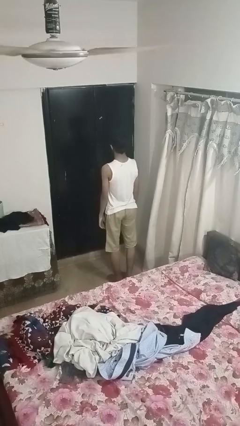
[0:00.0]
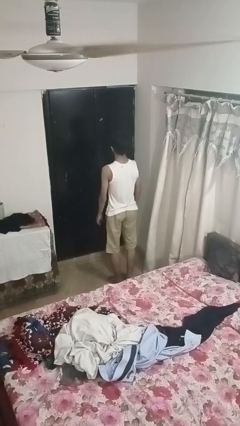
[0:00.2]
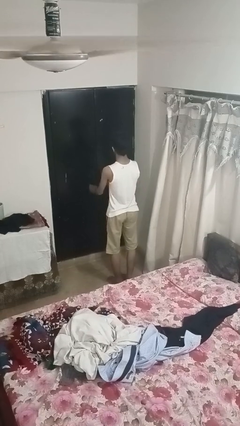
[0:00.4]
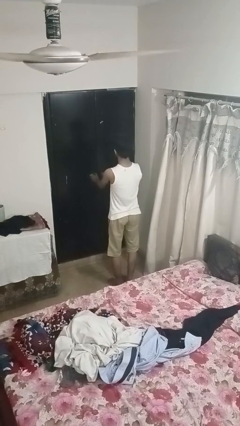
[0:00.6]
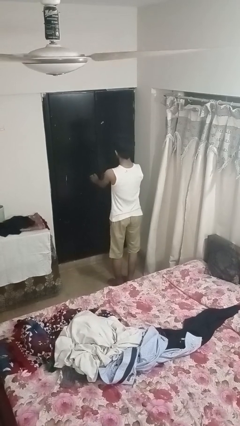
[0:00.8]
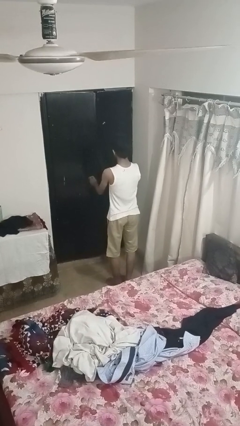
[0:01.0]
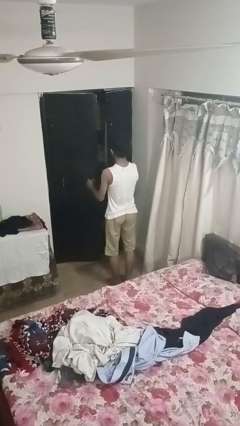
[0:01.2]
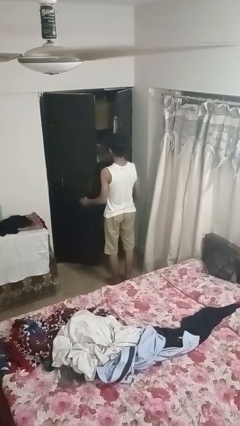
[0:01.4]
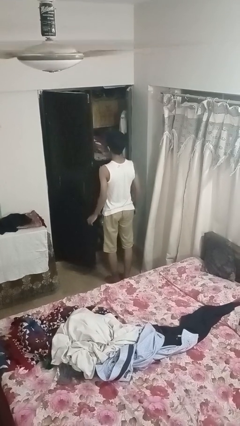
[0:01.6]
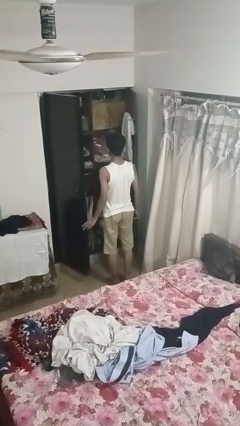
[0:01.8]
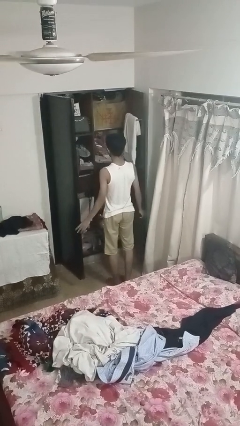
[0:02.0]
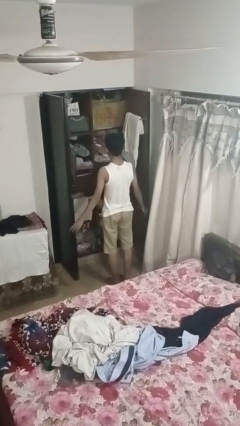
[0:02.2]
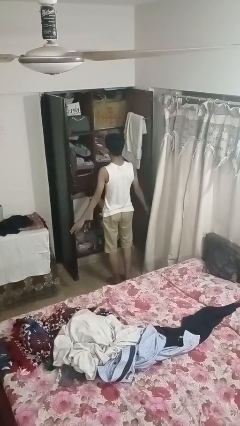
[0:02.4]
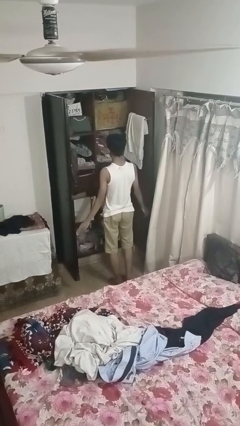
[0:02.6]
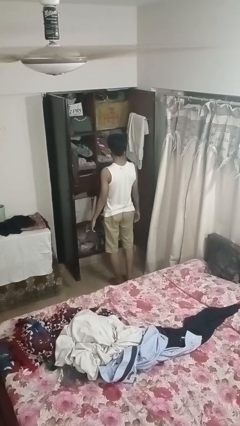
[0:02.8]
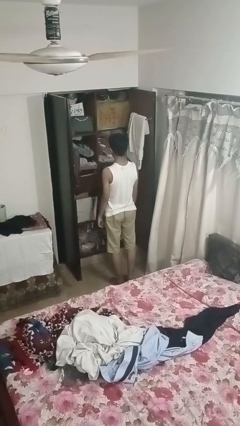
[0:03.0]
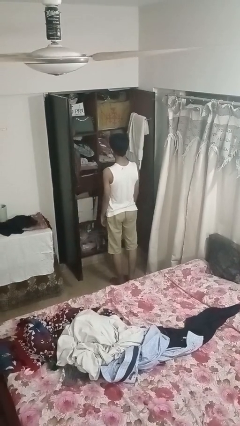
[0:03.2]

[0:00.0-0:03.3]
person opens closet door

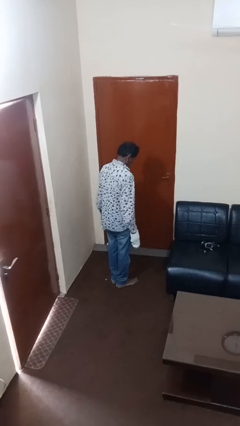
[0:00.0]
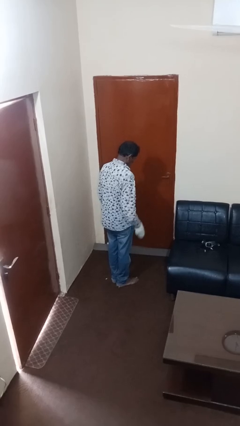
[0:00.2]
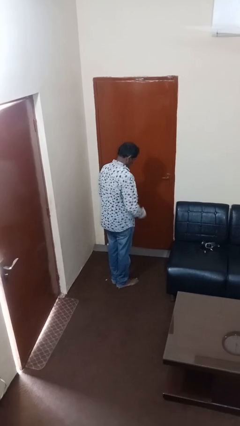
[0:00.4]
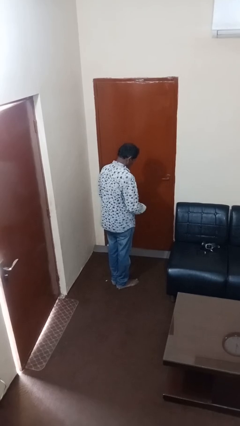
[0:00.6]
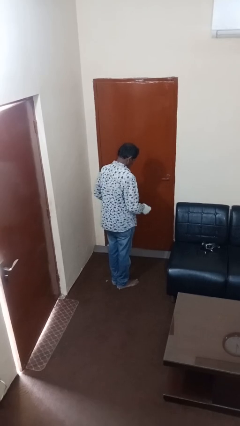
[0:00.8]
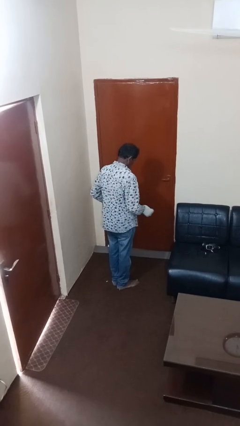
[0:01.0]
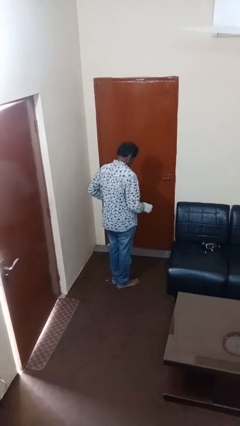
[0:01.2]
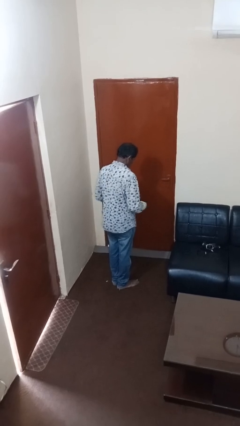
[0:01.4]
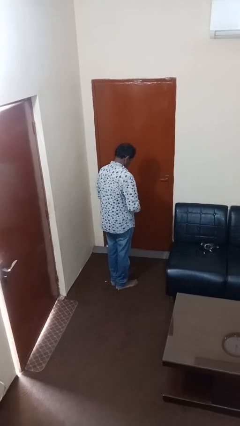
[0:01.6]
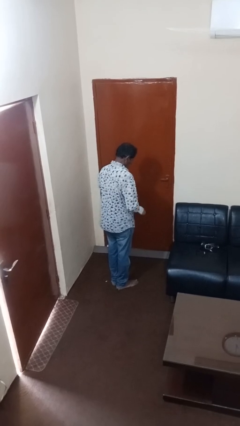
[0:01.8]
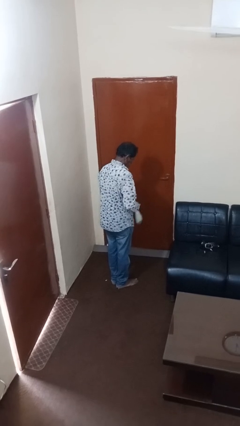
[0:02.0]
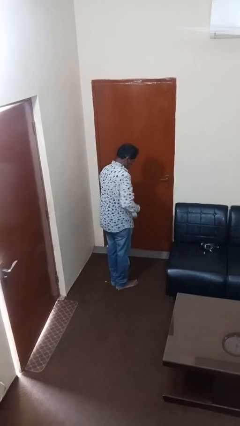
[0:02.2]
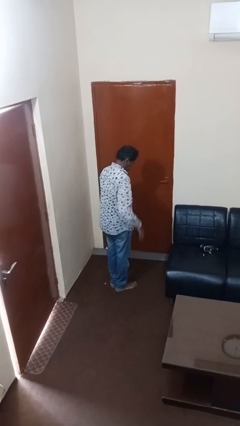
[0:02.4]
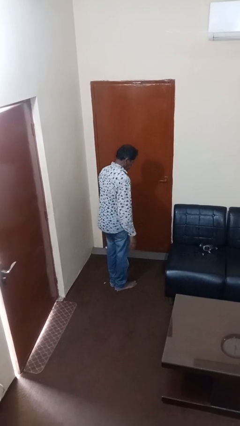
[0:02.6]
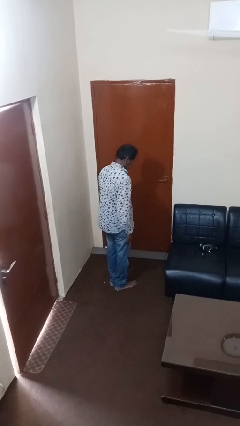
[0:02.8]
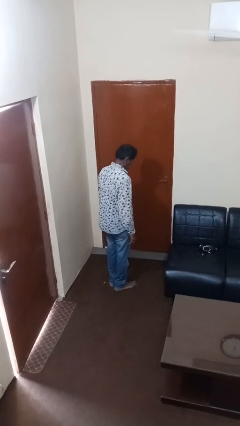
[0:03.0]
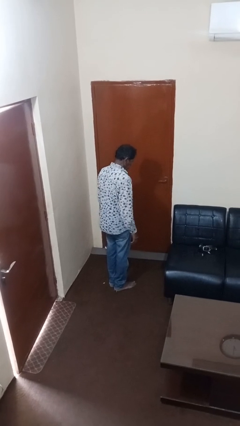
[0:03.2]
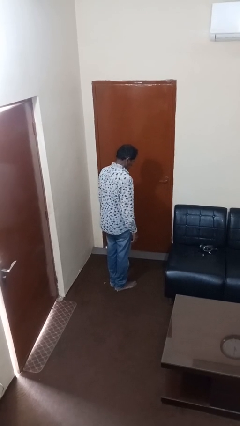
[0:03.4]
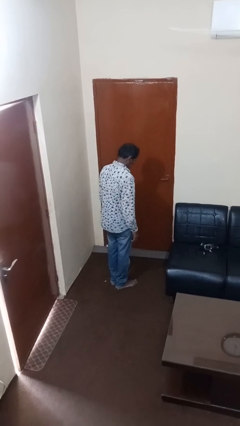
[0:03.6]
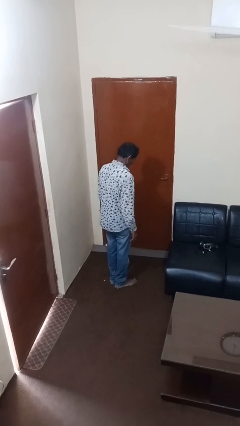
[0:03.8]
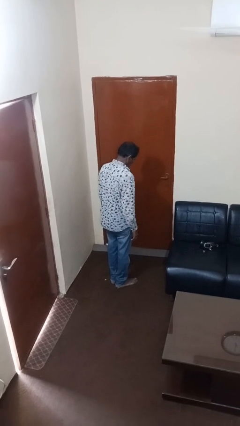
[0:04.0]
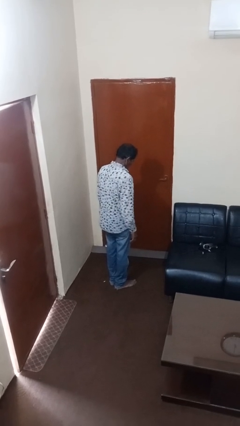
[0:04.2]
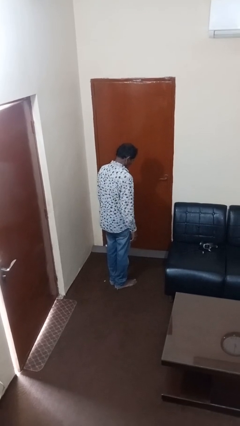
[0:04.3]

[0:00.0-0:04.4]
person takes off gloves

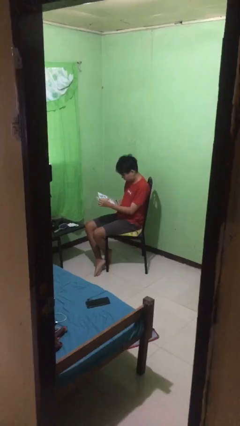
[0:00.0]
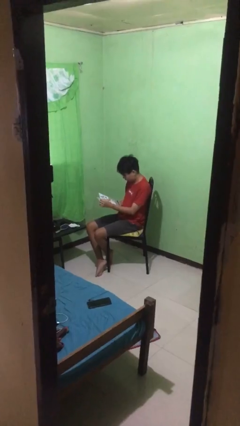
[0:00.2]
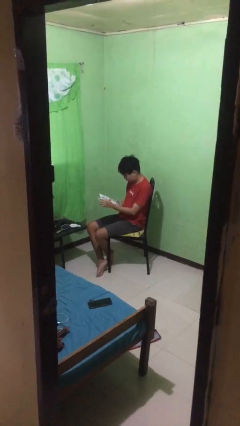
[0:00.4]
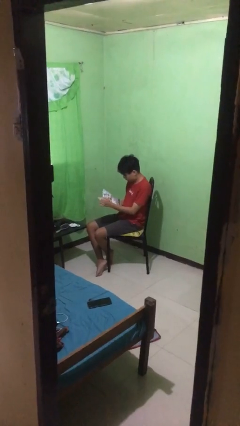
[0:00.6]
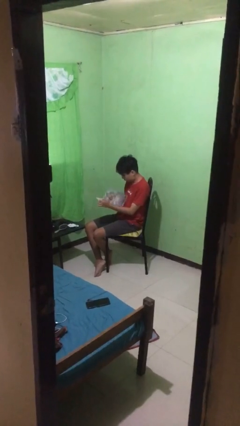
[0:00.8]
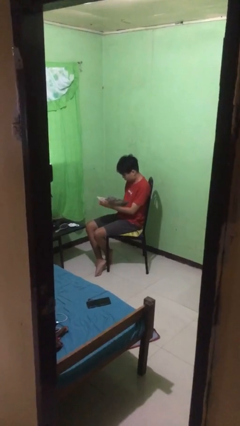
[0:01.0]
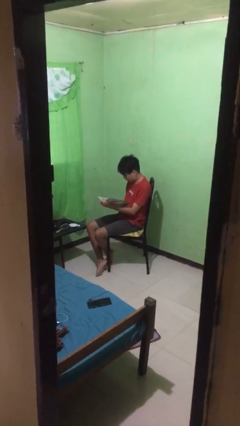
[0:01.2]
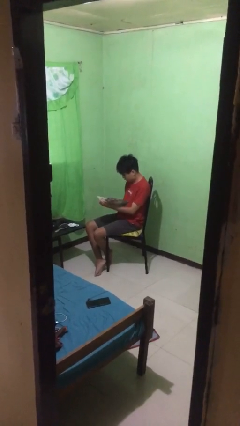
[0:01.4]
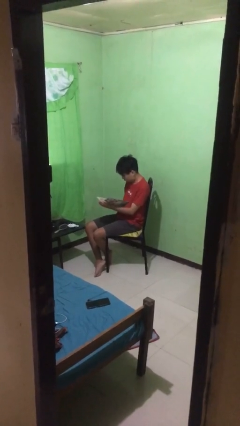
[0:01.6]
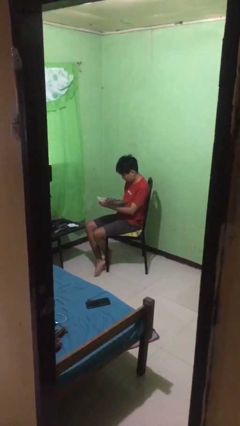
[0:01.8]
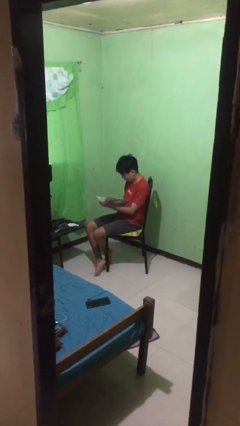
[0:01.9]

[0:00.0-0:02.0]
person reads document

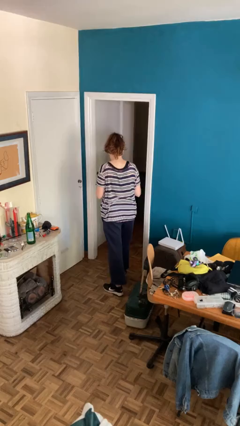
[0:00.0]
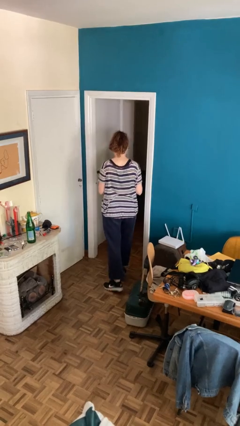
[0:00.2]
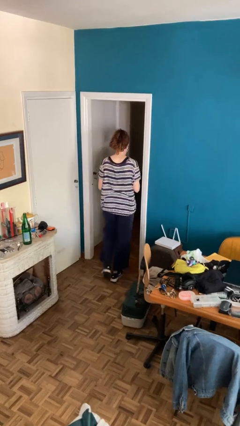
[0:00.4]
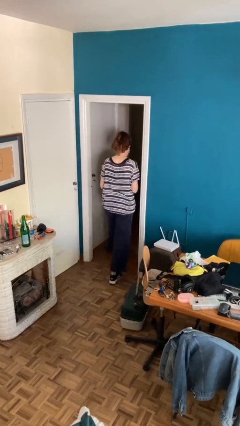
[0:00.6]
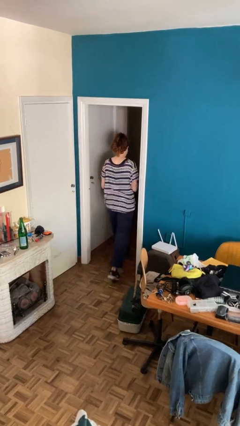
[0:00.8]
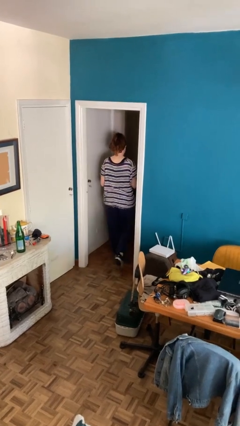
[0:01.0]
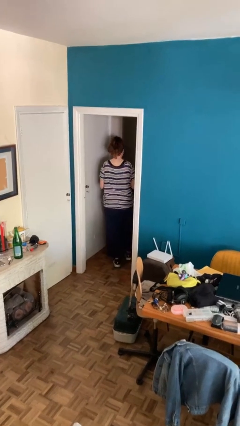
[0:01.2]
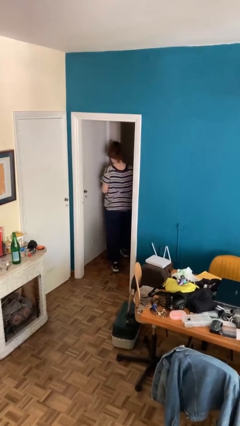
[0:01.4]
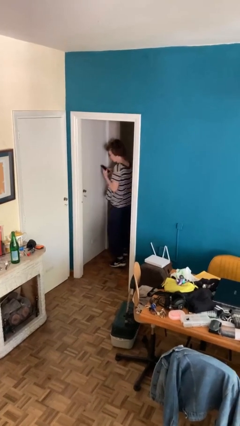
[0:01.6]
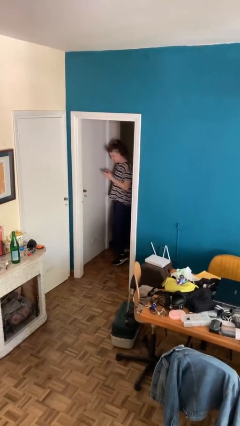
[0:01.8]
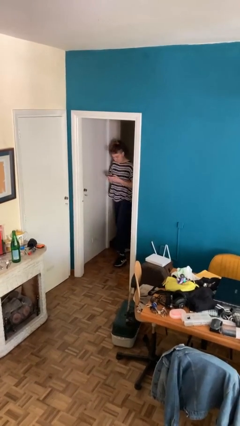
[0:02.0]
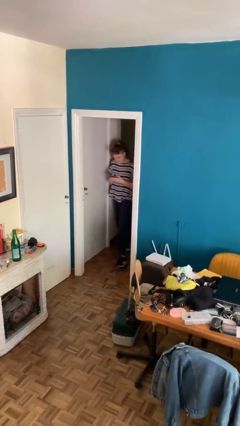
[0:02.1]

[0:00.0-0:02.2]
person enters scene through structure

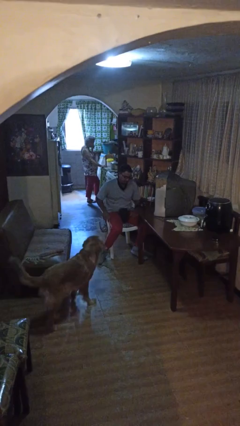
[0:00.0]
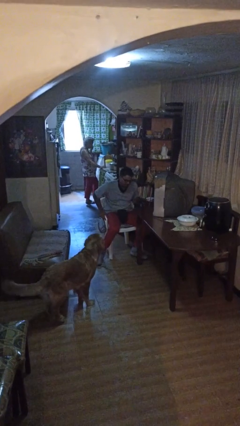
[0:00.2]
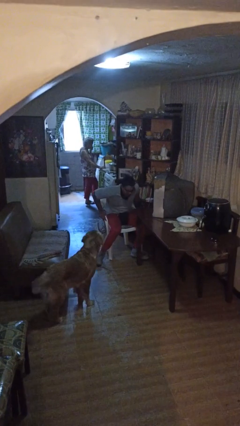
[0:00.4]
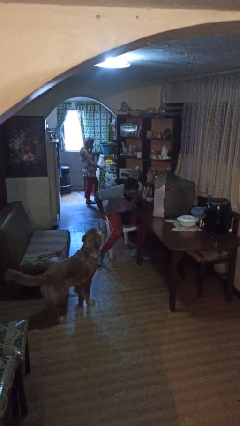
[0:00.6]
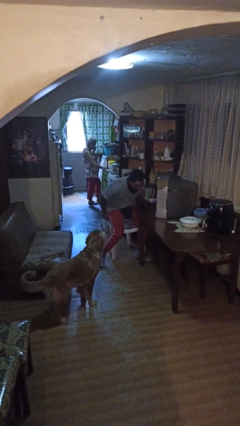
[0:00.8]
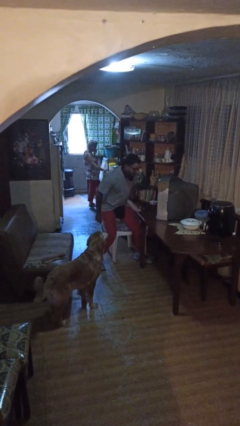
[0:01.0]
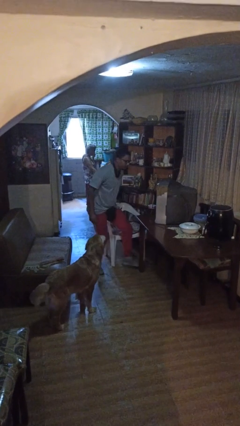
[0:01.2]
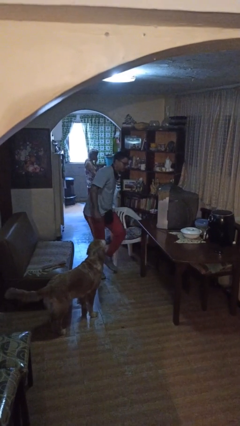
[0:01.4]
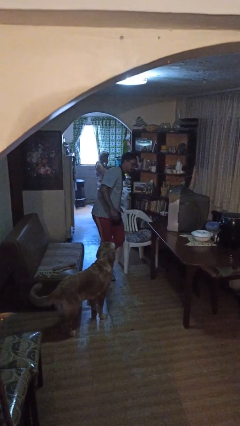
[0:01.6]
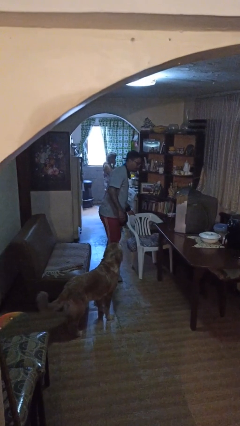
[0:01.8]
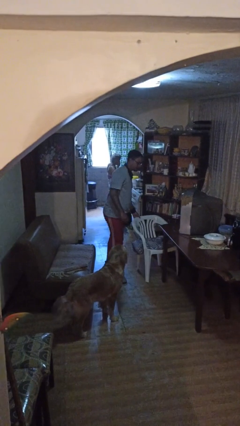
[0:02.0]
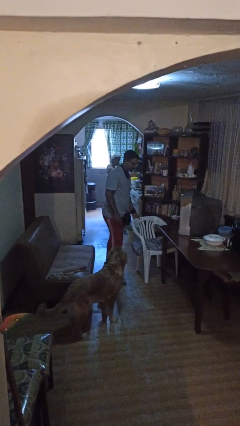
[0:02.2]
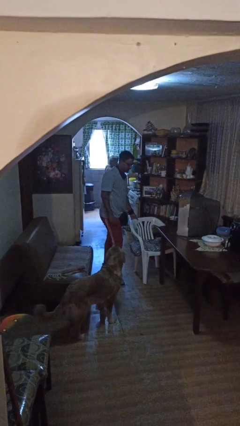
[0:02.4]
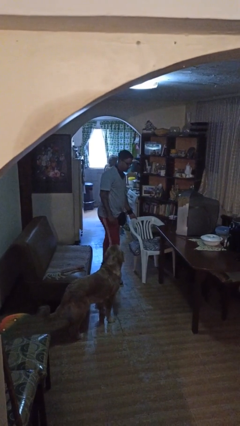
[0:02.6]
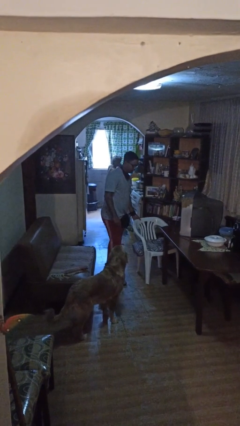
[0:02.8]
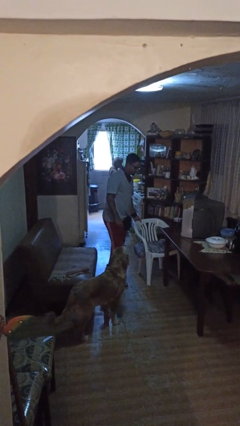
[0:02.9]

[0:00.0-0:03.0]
person stands up

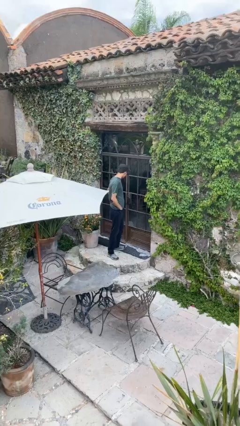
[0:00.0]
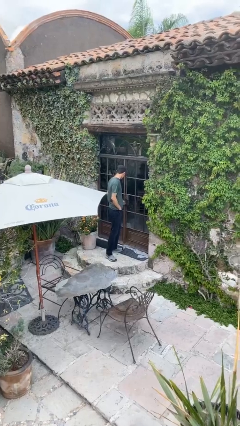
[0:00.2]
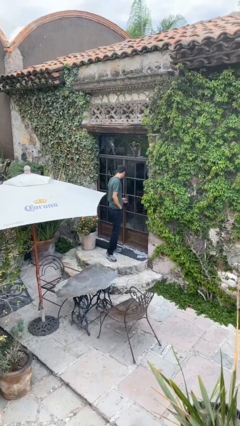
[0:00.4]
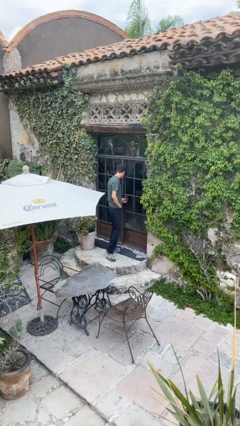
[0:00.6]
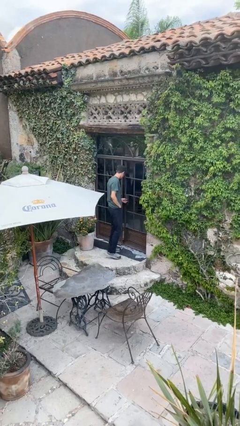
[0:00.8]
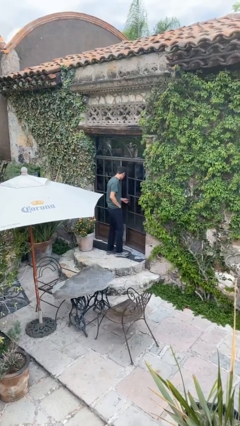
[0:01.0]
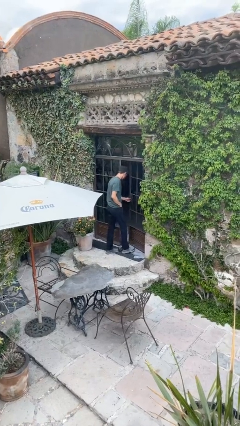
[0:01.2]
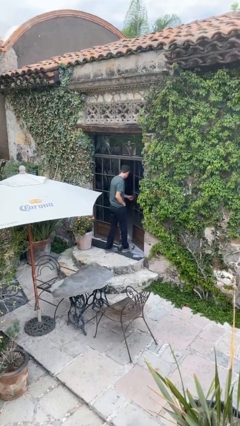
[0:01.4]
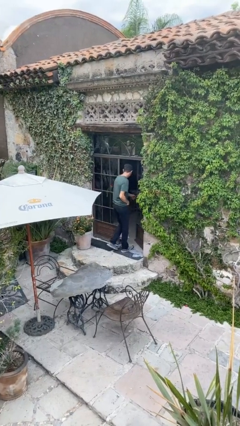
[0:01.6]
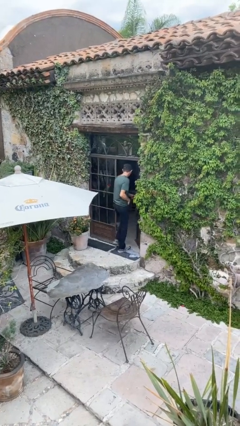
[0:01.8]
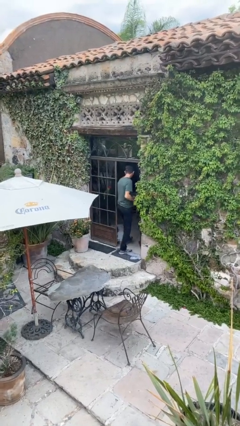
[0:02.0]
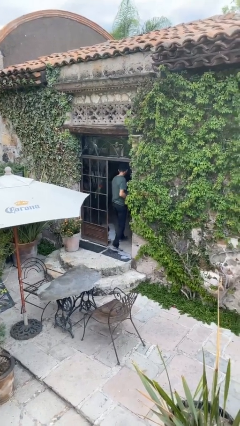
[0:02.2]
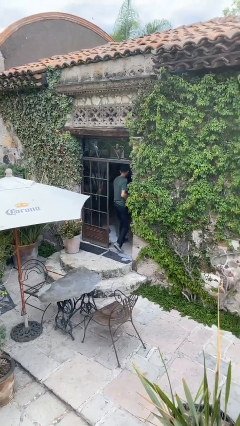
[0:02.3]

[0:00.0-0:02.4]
person opens facility door

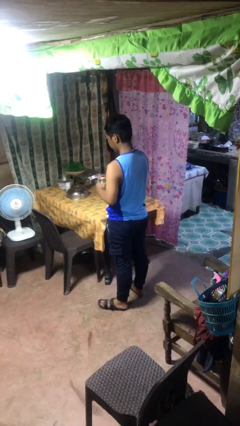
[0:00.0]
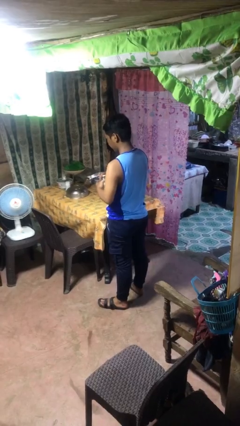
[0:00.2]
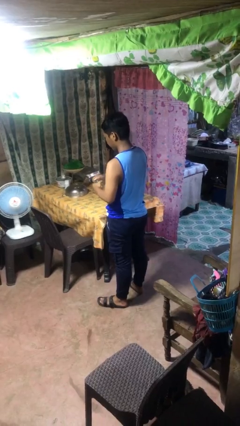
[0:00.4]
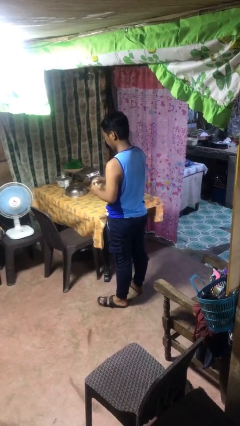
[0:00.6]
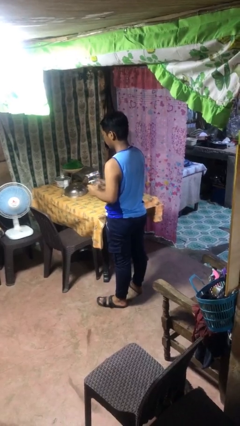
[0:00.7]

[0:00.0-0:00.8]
person closes jar
